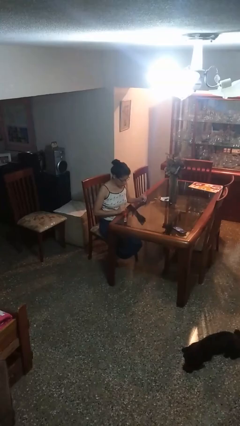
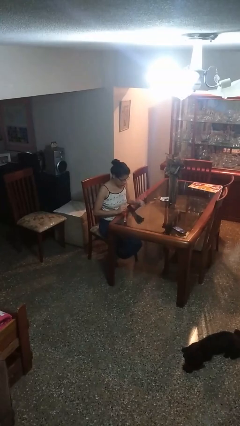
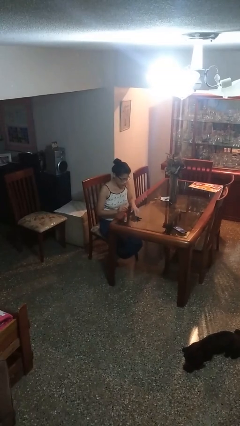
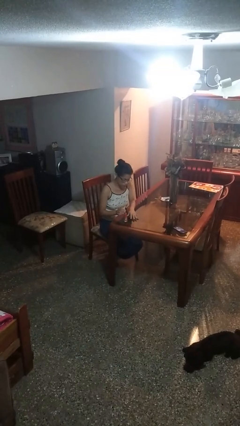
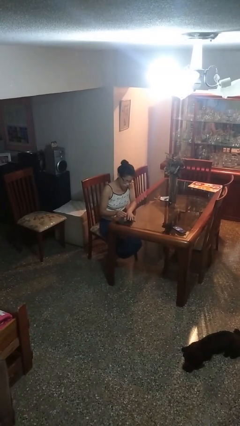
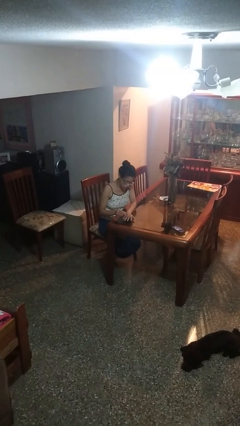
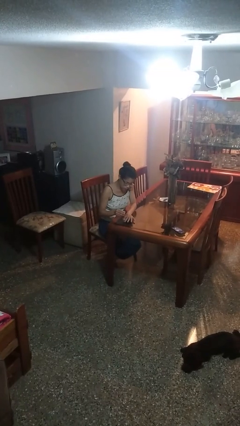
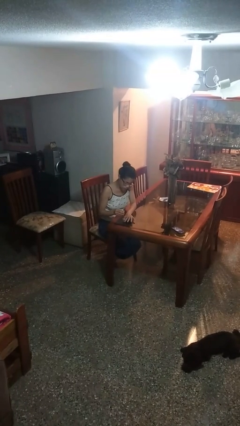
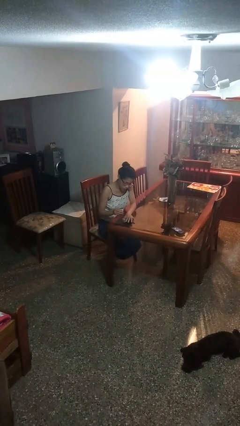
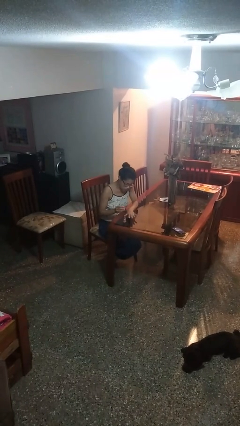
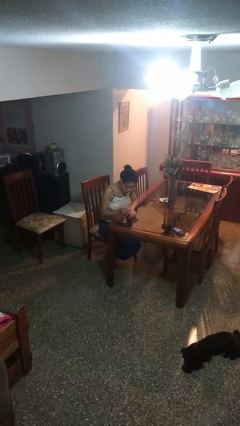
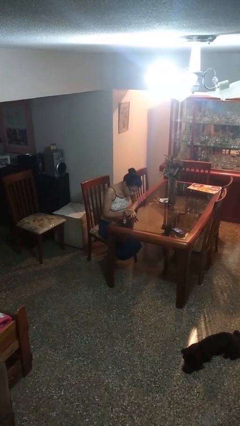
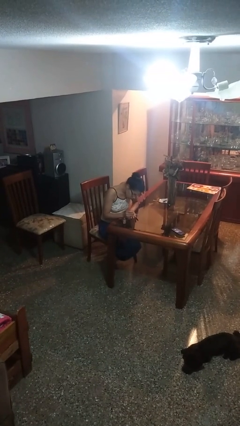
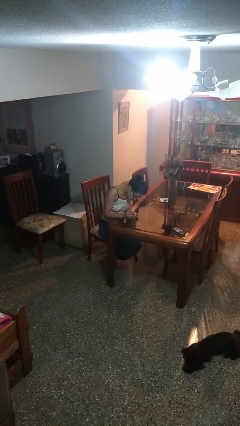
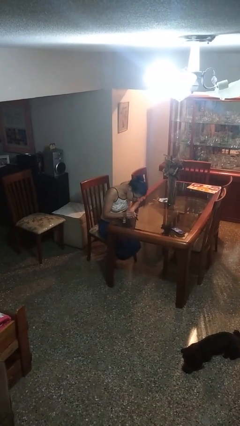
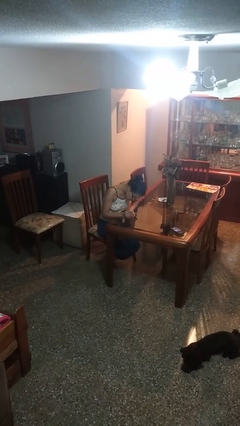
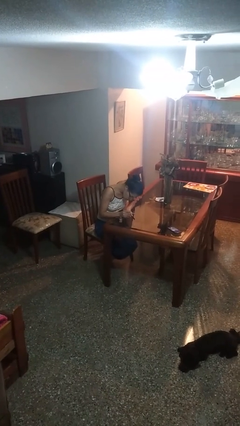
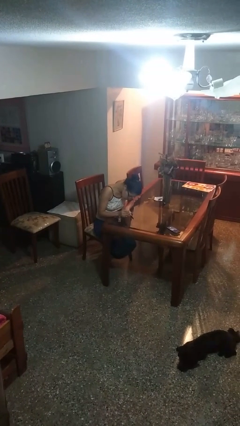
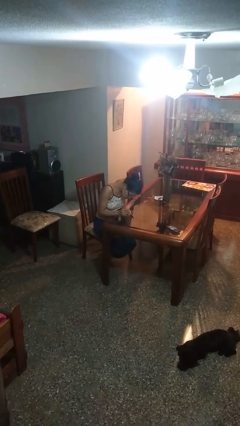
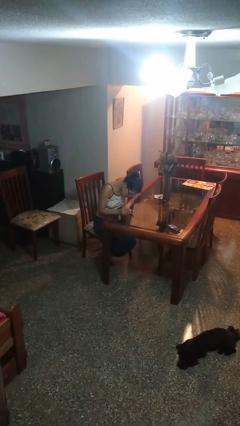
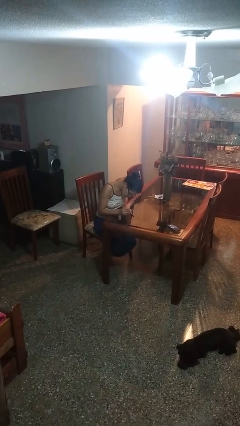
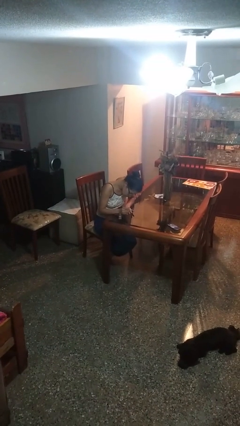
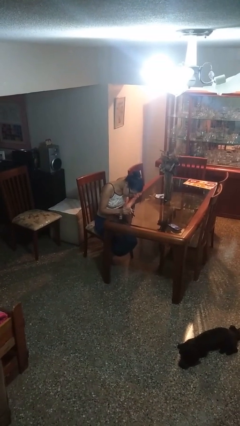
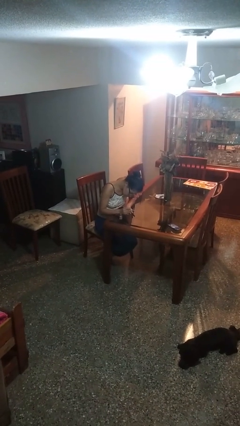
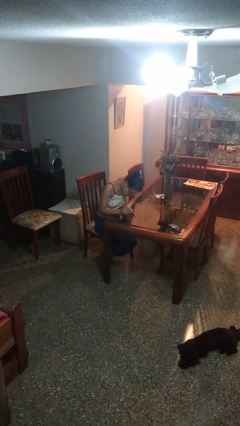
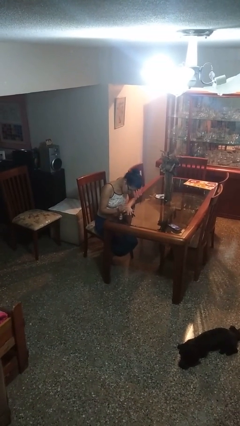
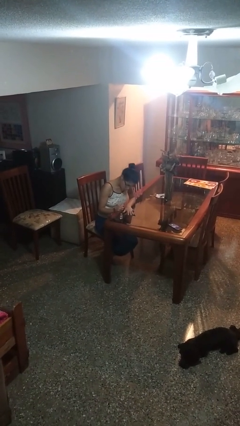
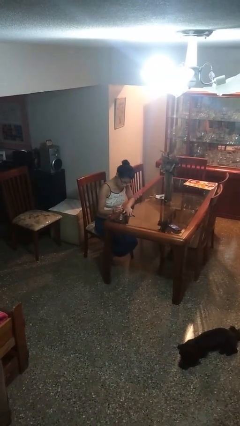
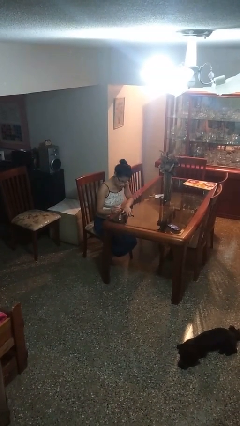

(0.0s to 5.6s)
person paints fingernails

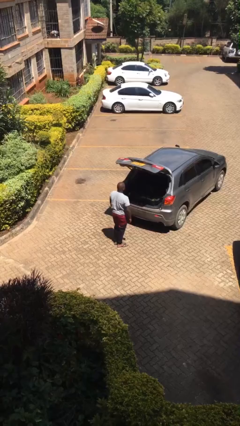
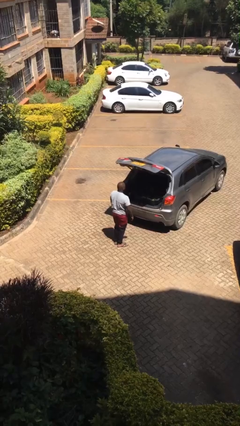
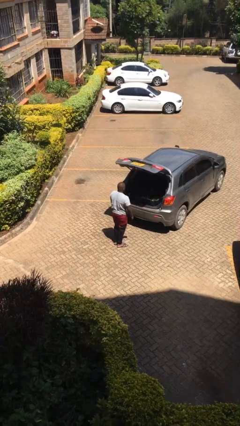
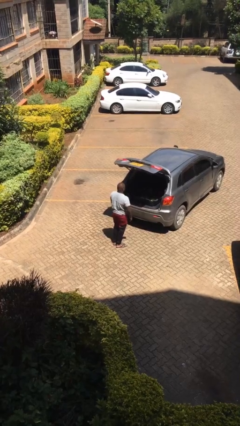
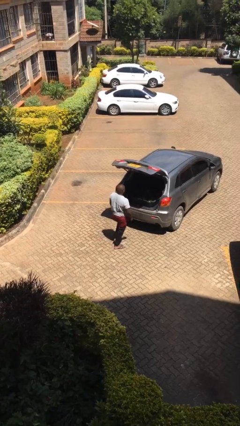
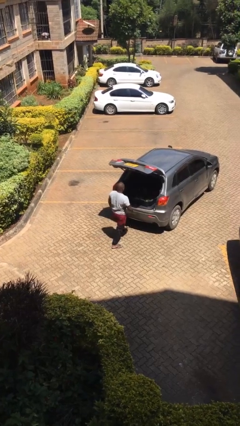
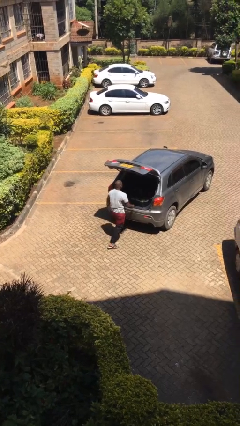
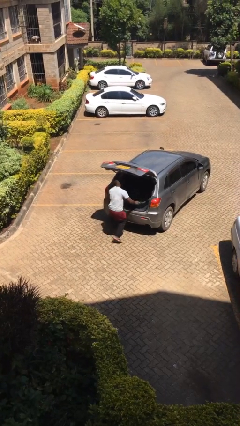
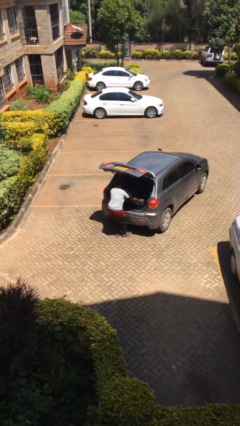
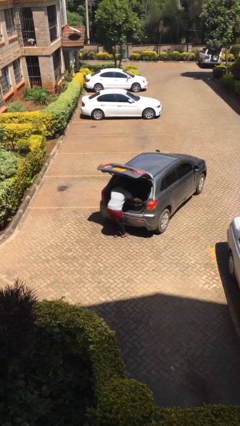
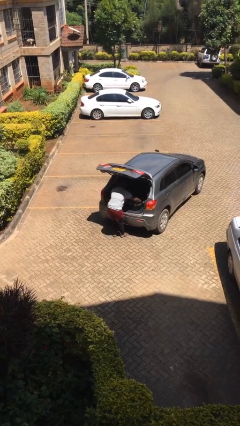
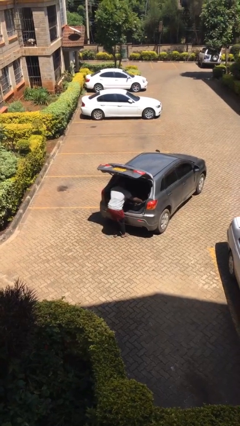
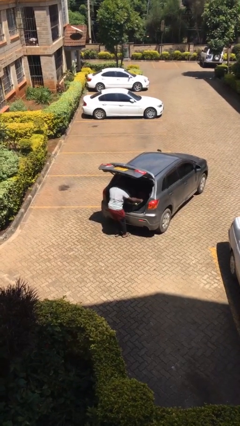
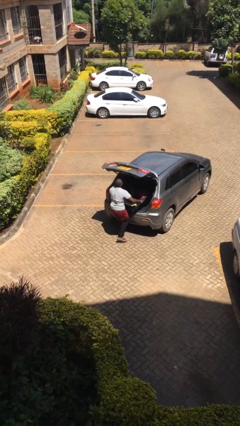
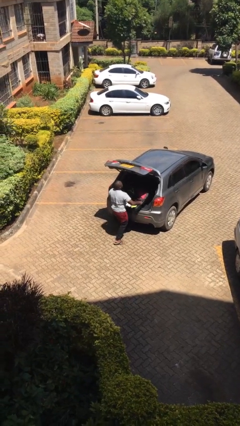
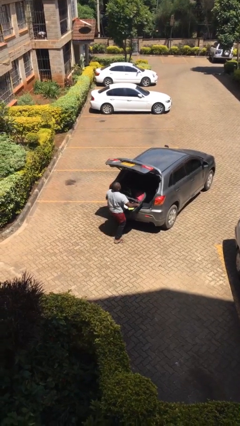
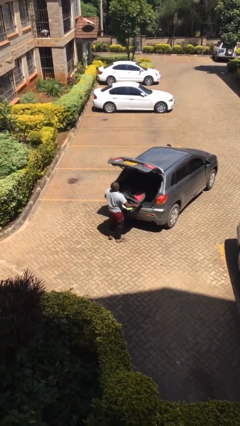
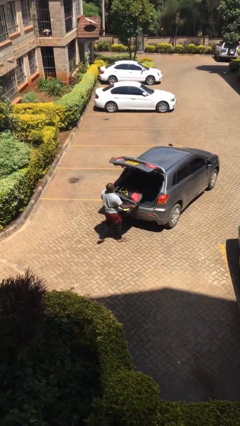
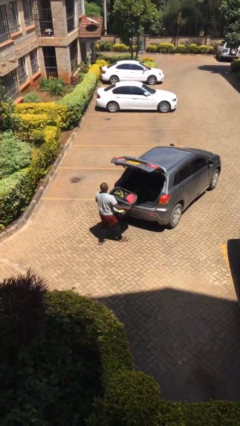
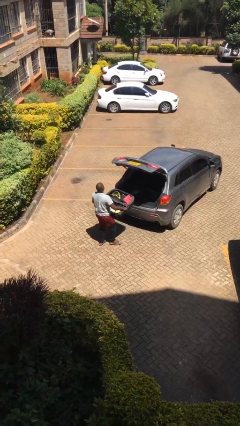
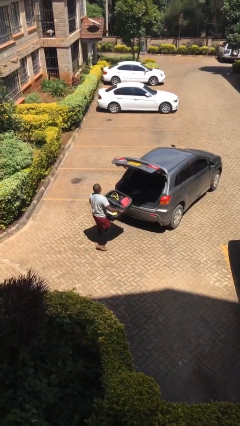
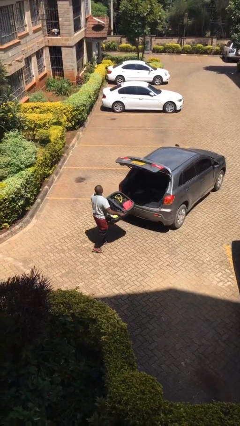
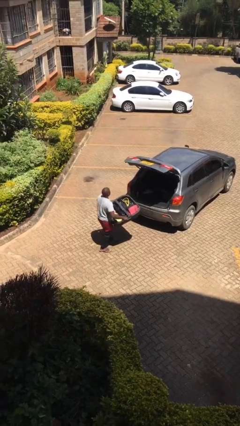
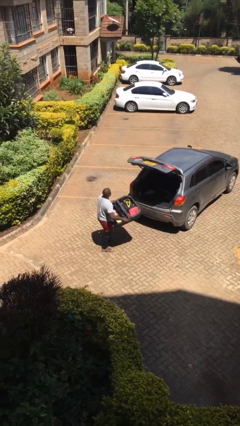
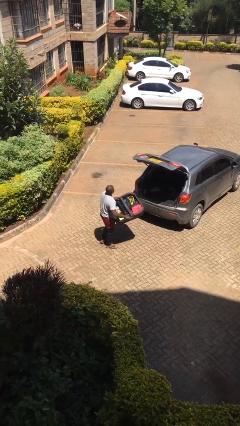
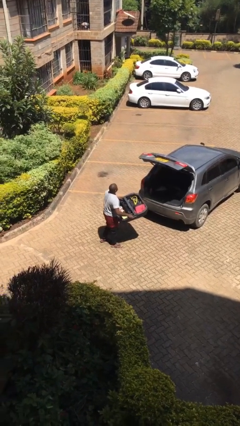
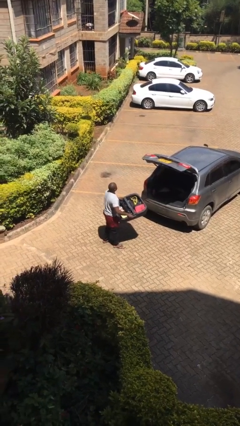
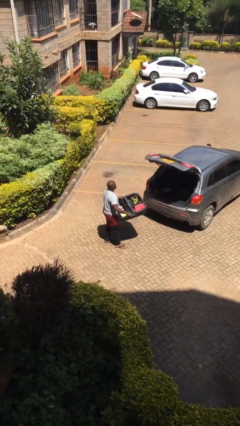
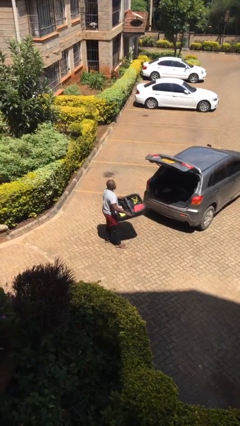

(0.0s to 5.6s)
person unloads car

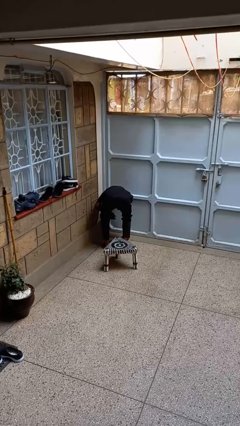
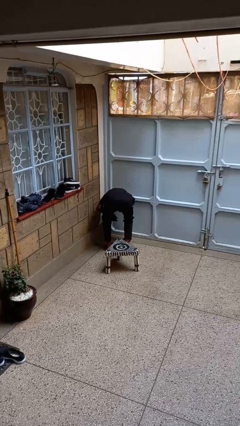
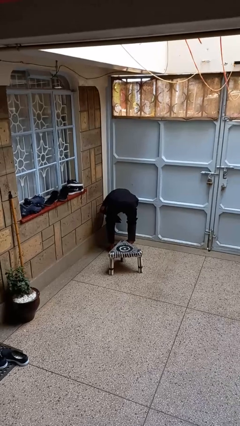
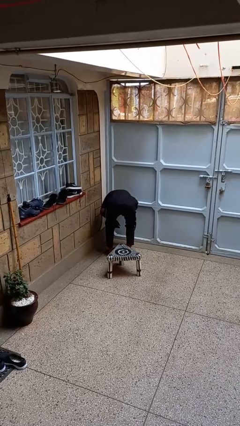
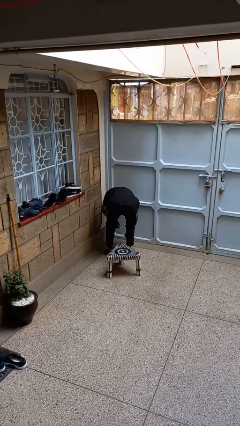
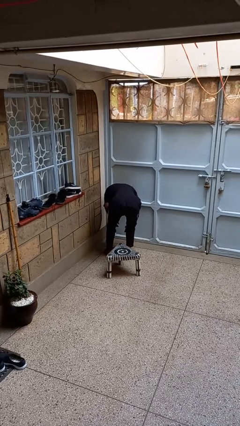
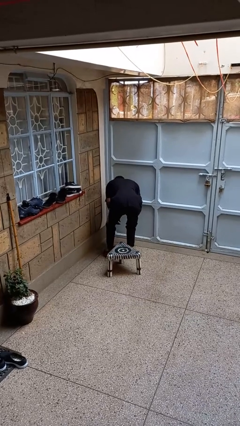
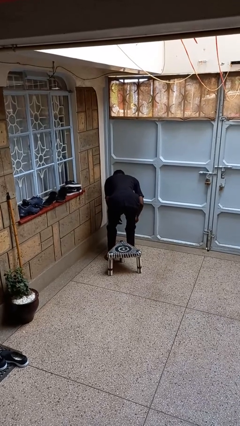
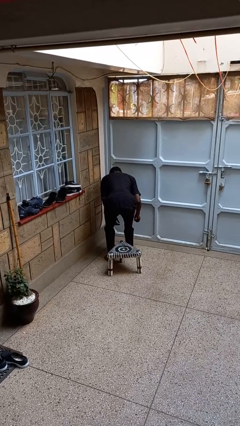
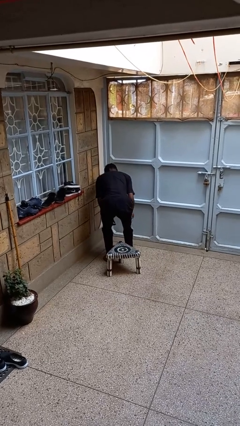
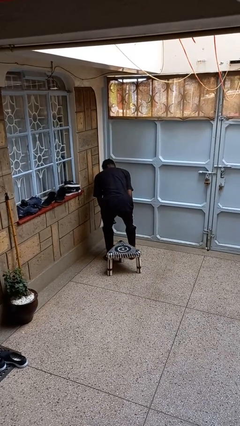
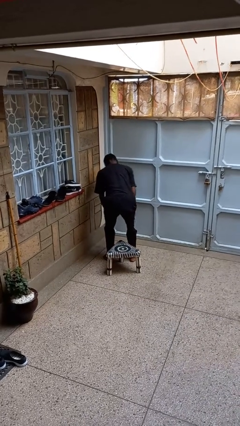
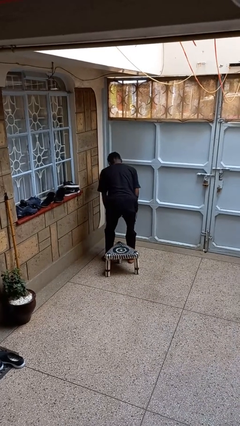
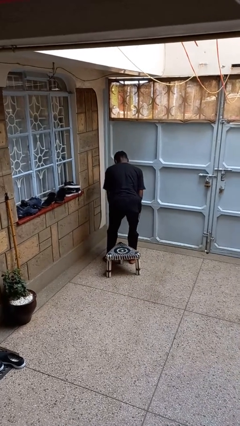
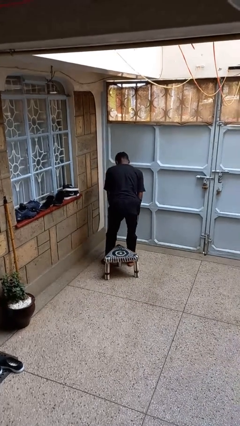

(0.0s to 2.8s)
person stands up from floor

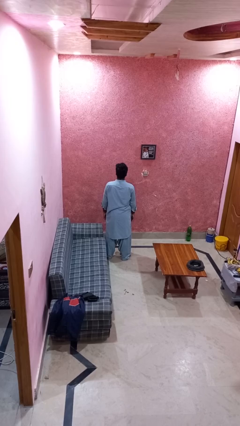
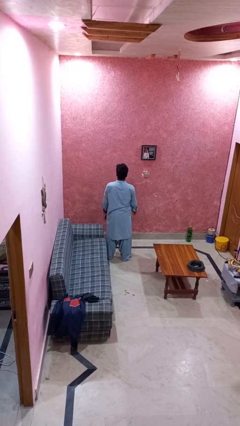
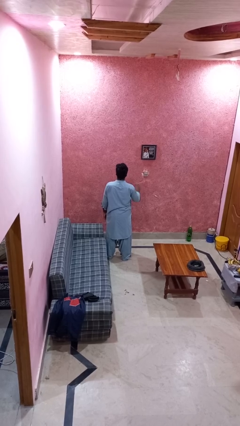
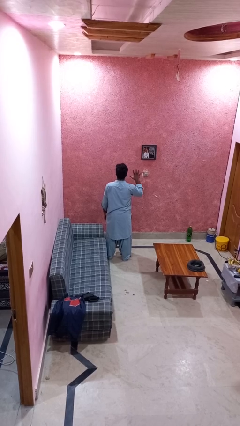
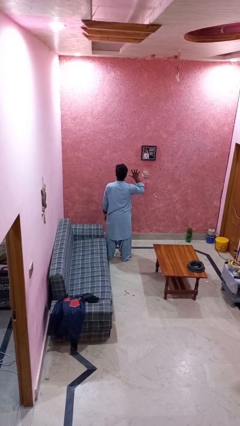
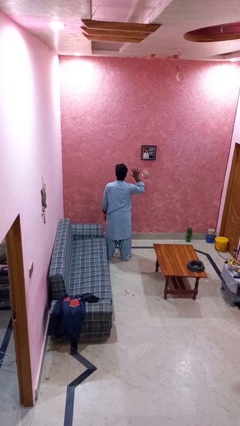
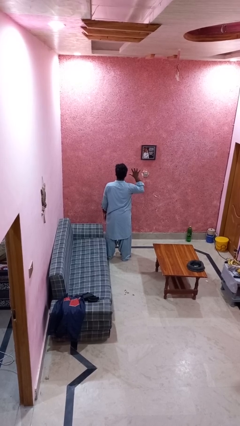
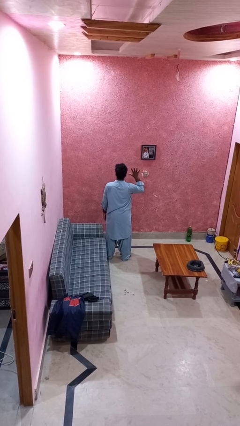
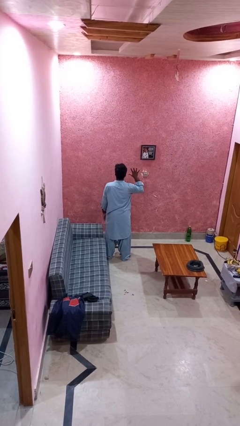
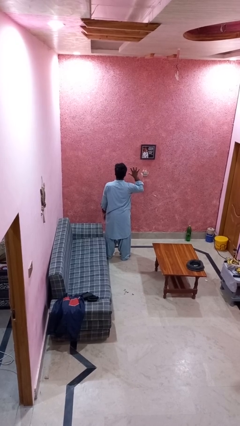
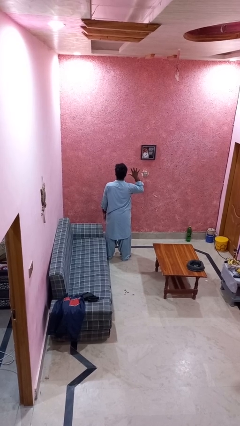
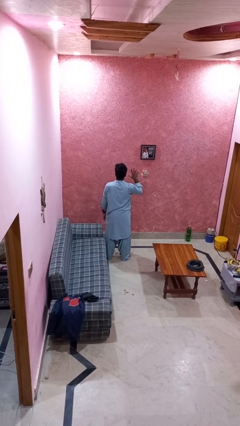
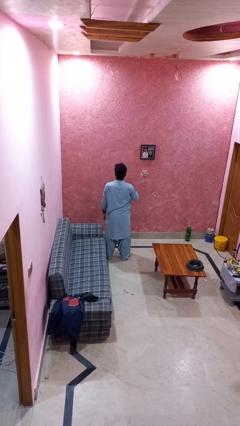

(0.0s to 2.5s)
person gestures number five

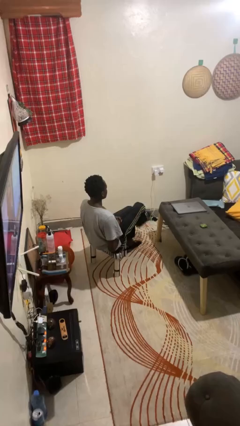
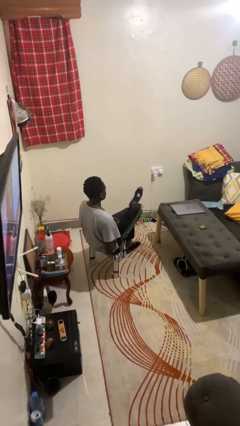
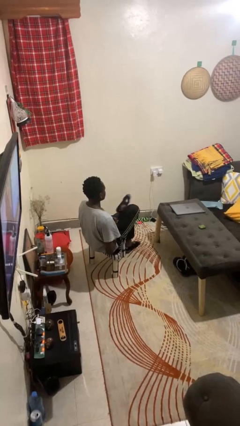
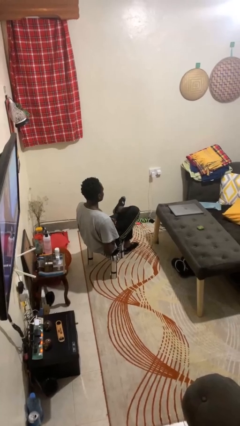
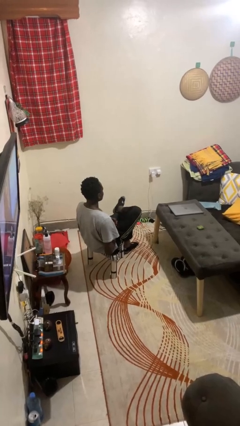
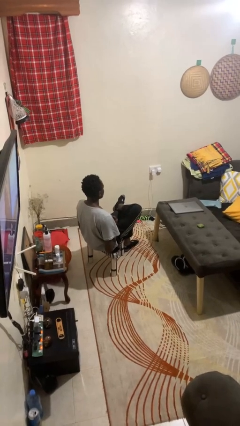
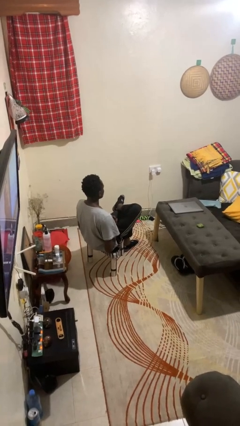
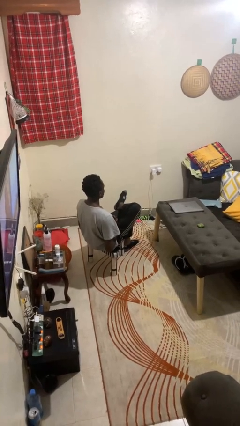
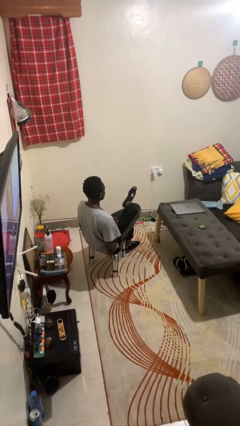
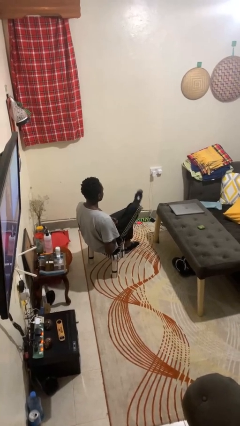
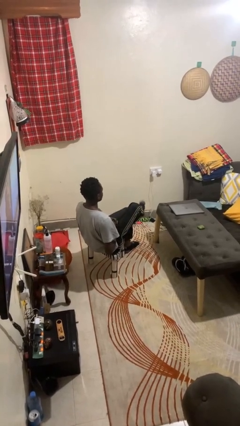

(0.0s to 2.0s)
person crosses legs
